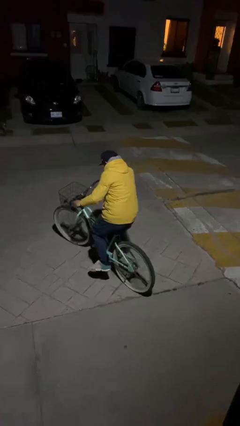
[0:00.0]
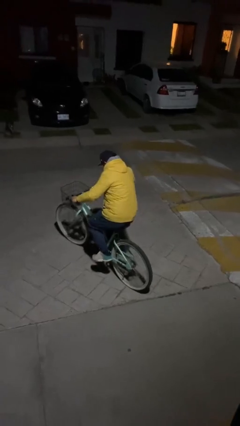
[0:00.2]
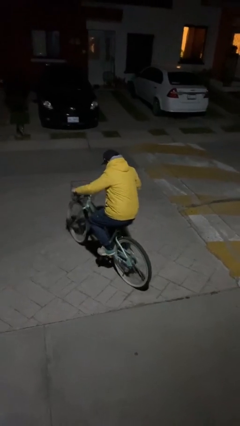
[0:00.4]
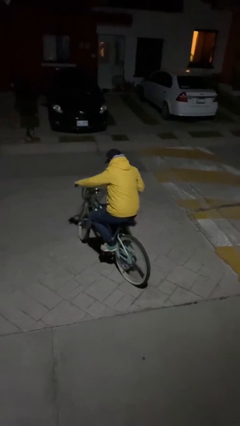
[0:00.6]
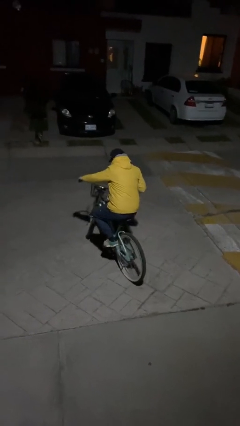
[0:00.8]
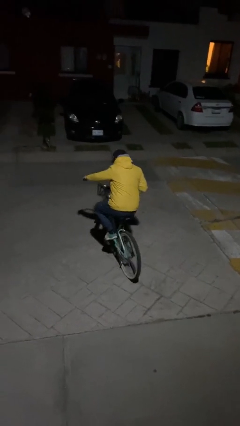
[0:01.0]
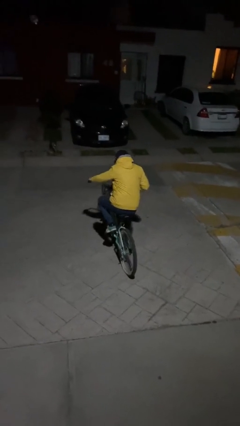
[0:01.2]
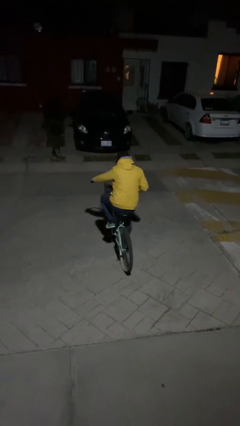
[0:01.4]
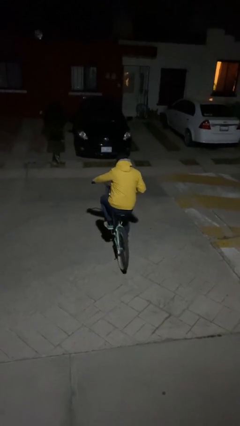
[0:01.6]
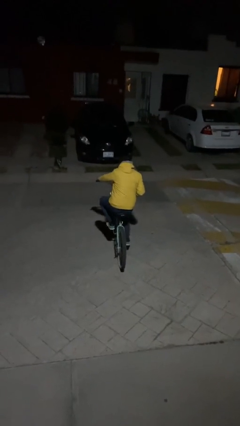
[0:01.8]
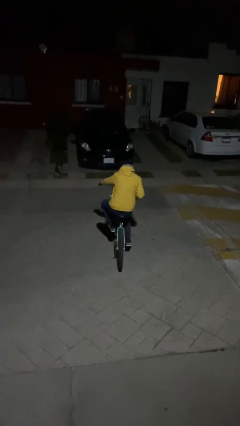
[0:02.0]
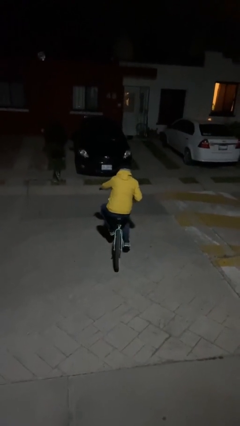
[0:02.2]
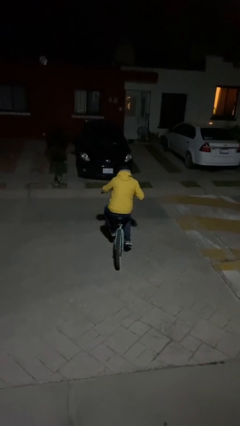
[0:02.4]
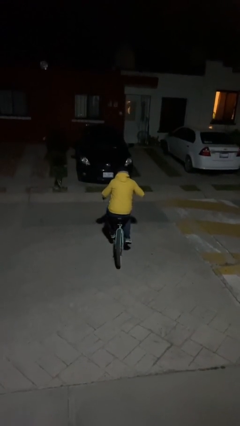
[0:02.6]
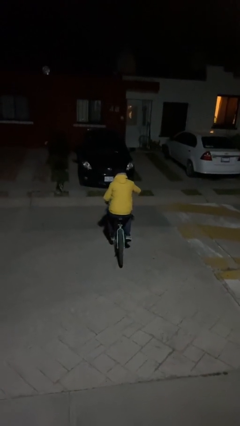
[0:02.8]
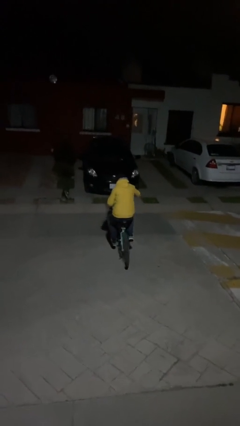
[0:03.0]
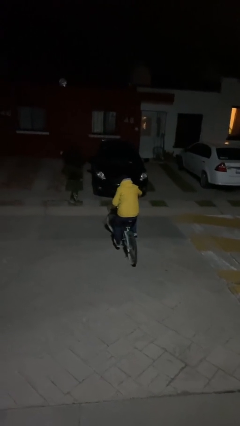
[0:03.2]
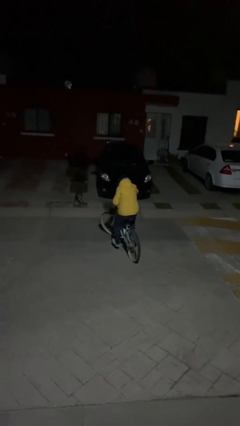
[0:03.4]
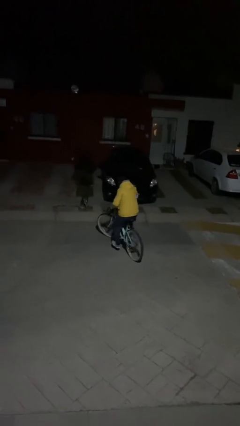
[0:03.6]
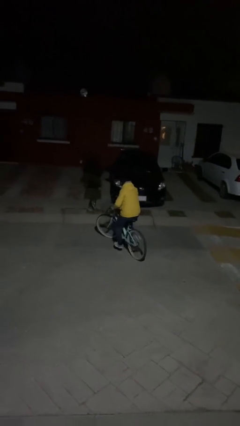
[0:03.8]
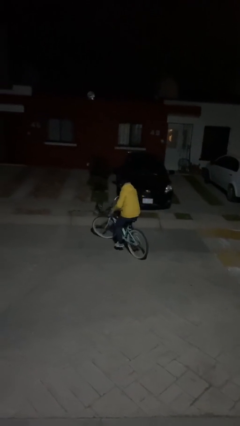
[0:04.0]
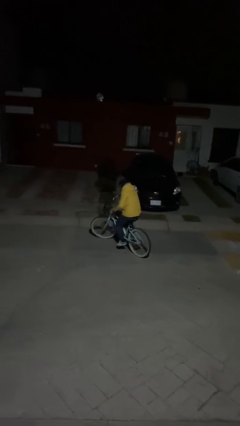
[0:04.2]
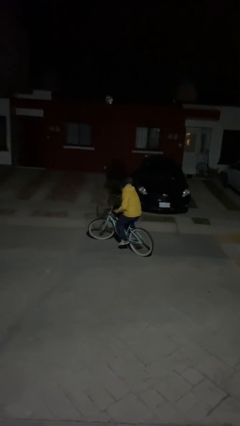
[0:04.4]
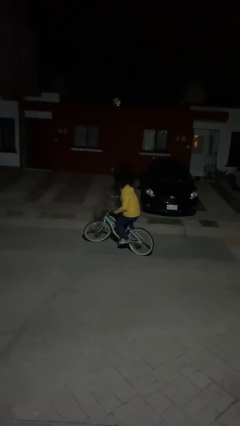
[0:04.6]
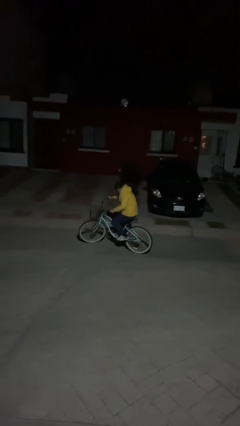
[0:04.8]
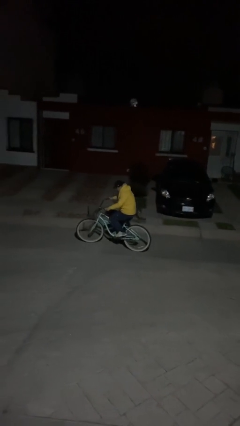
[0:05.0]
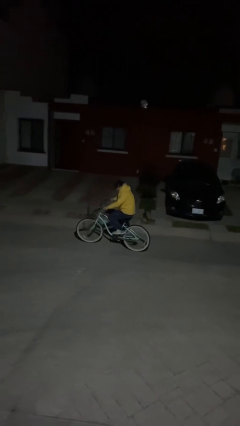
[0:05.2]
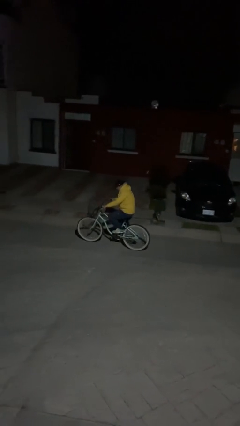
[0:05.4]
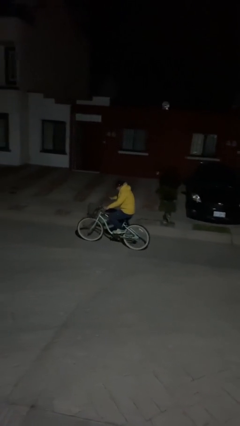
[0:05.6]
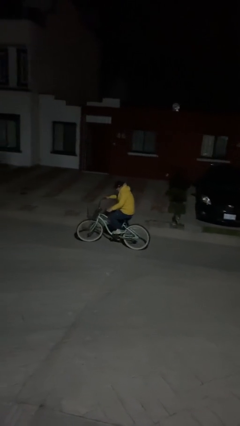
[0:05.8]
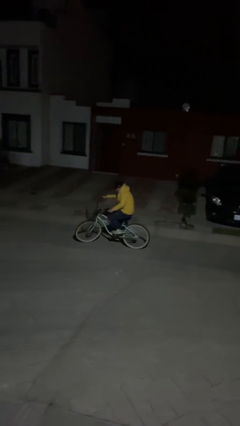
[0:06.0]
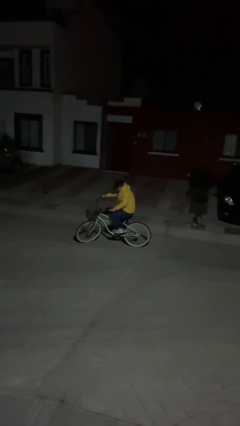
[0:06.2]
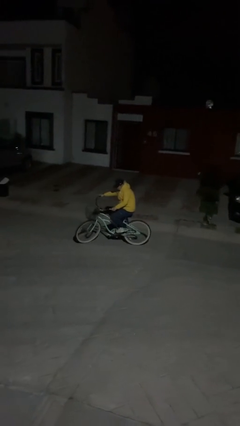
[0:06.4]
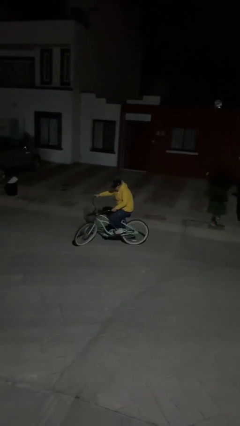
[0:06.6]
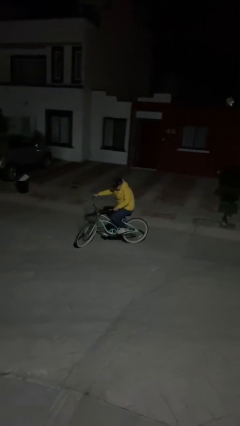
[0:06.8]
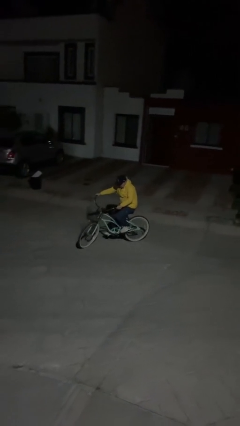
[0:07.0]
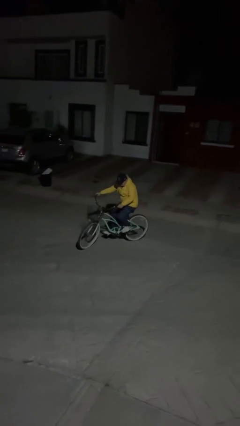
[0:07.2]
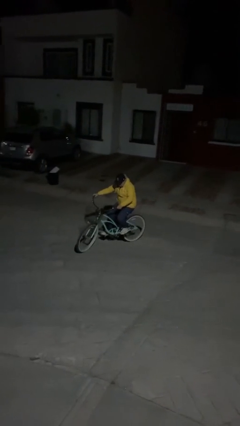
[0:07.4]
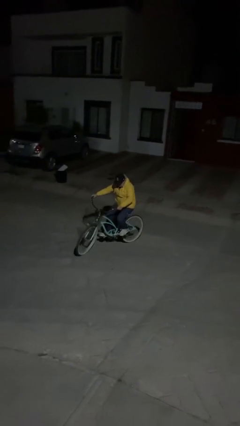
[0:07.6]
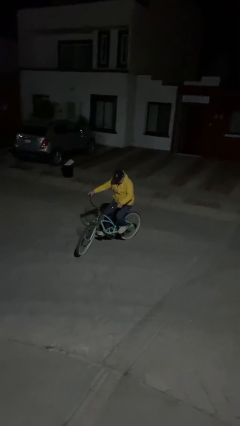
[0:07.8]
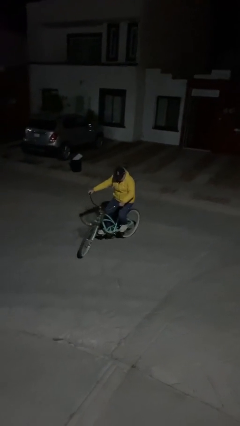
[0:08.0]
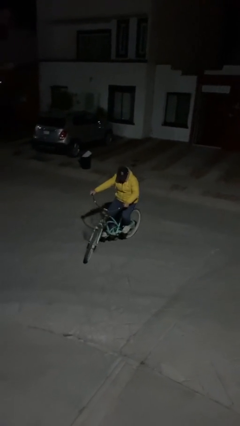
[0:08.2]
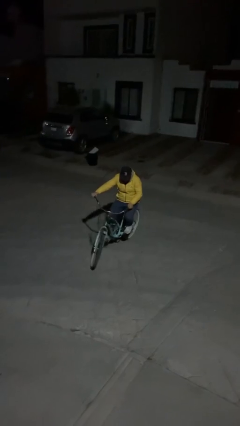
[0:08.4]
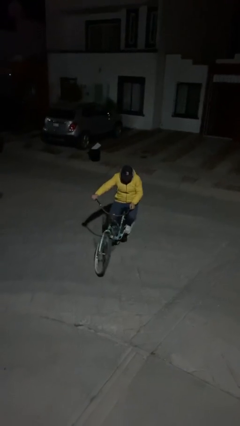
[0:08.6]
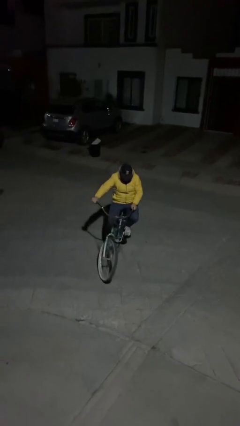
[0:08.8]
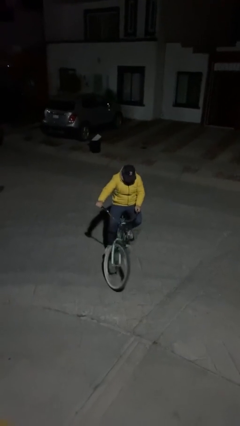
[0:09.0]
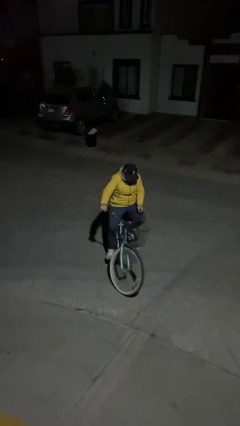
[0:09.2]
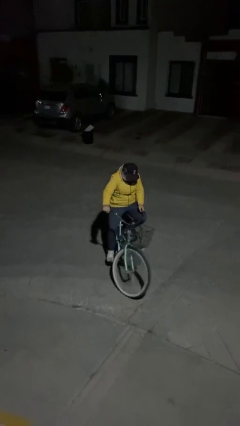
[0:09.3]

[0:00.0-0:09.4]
person rides bicycle

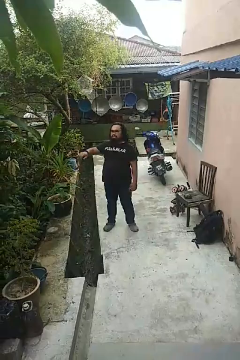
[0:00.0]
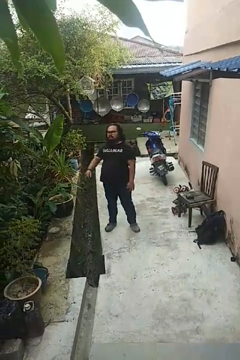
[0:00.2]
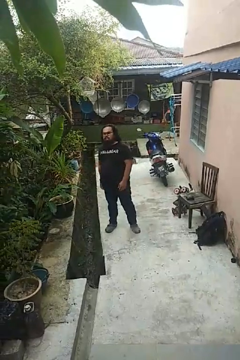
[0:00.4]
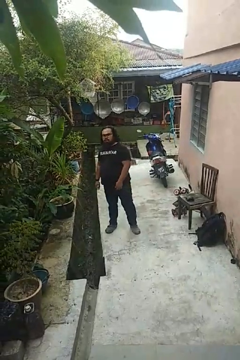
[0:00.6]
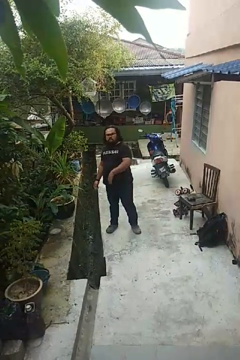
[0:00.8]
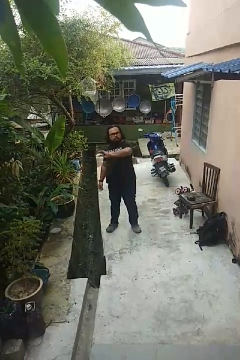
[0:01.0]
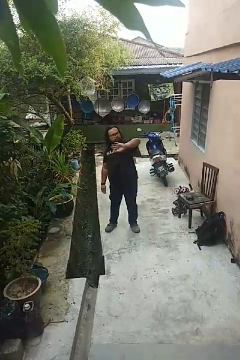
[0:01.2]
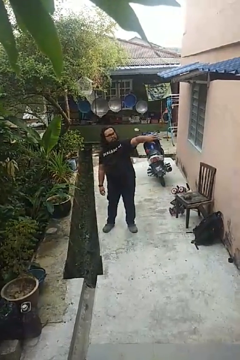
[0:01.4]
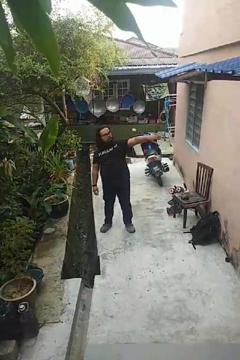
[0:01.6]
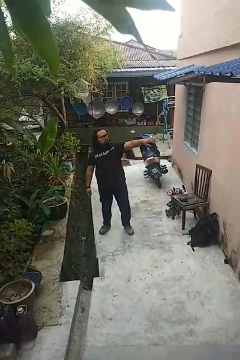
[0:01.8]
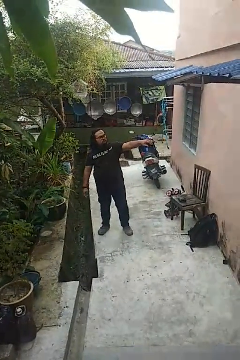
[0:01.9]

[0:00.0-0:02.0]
person gestures swipe left

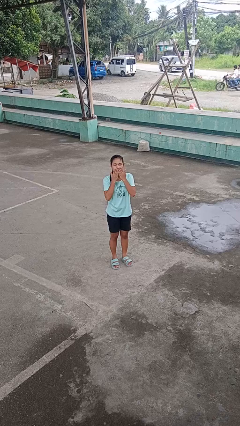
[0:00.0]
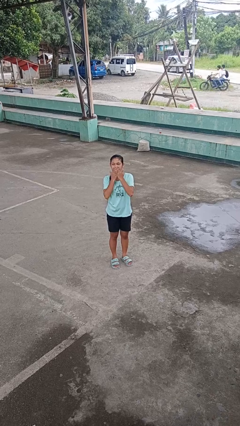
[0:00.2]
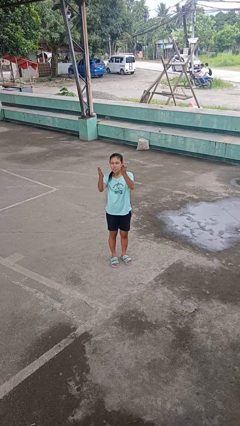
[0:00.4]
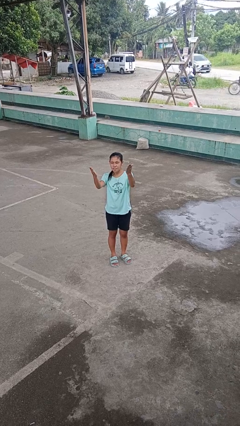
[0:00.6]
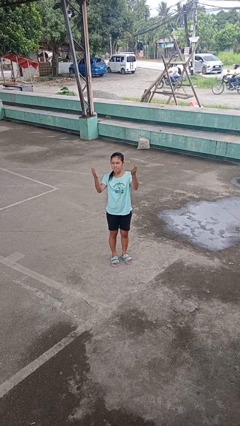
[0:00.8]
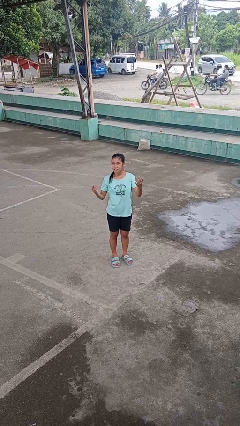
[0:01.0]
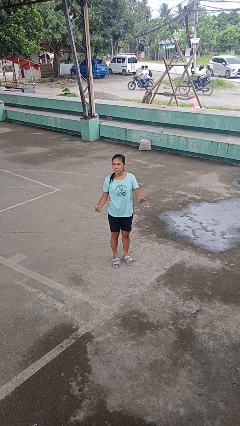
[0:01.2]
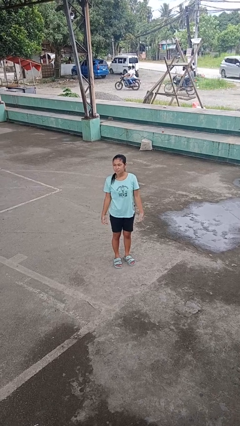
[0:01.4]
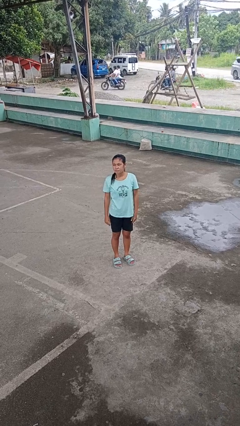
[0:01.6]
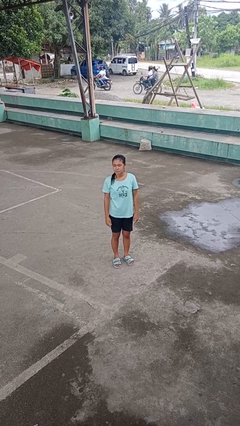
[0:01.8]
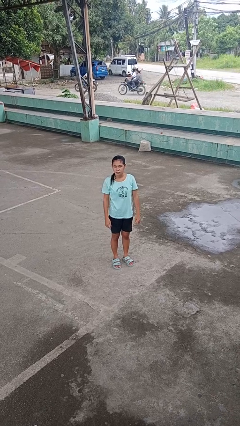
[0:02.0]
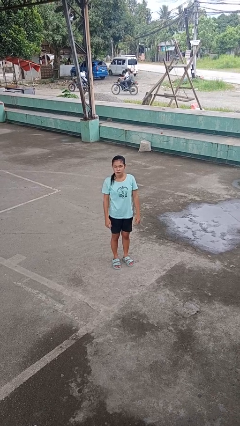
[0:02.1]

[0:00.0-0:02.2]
person gestures blow kiss

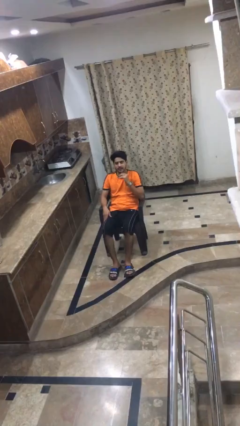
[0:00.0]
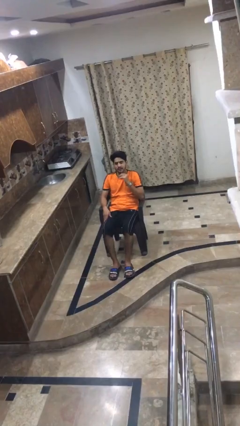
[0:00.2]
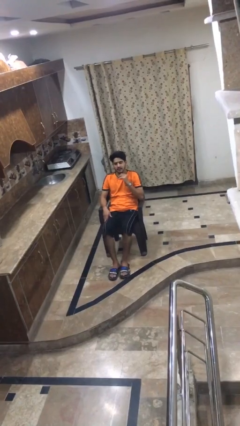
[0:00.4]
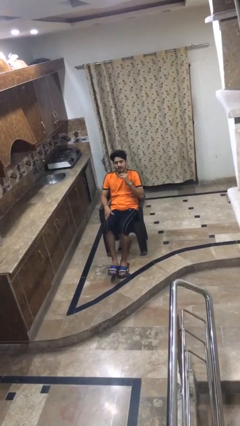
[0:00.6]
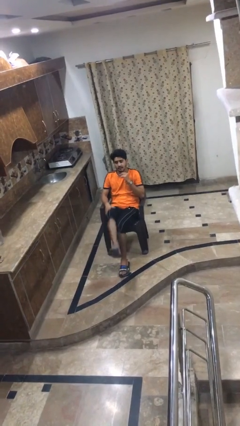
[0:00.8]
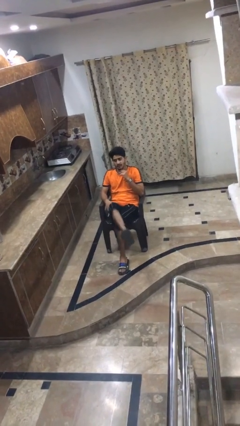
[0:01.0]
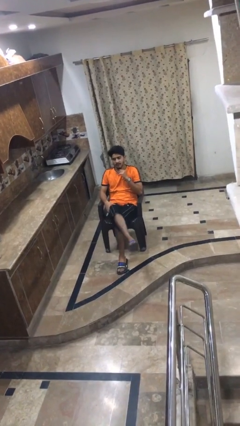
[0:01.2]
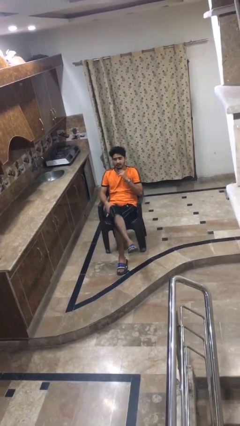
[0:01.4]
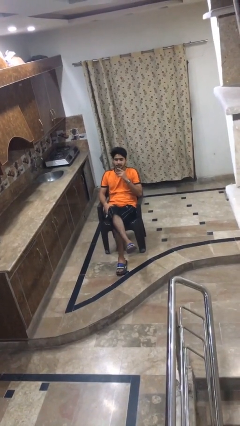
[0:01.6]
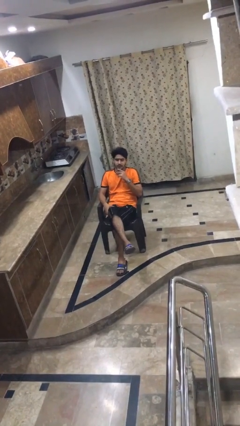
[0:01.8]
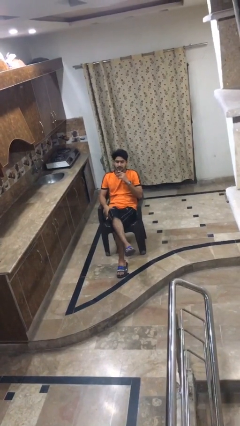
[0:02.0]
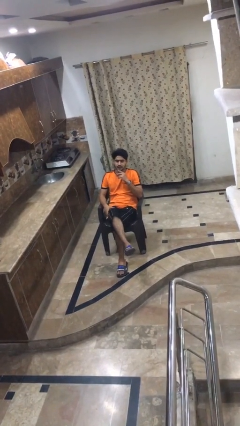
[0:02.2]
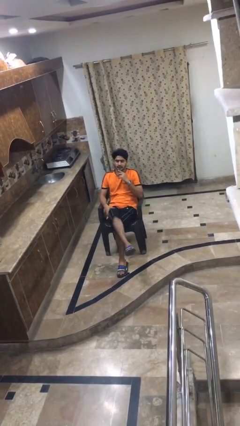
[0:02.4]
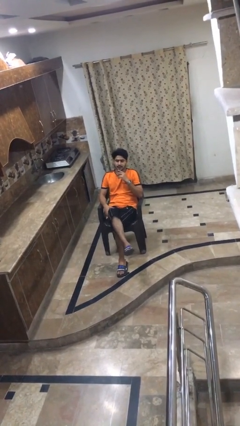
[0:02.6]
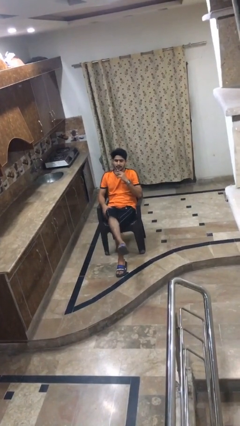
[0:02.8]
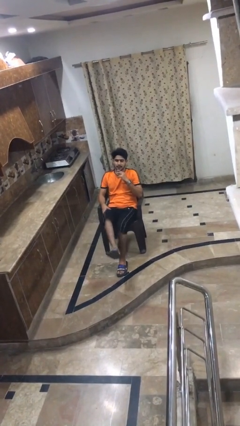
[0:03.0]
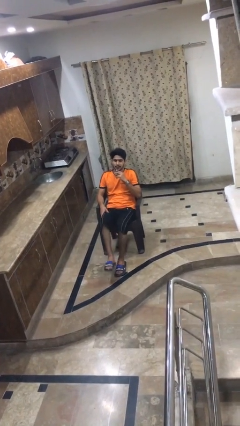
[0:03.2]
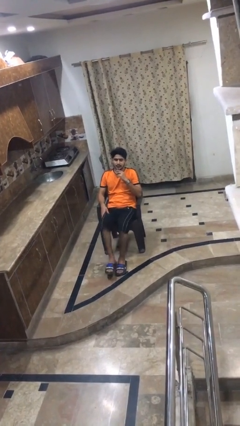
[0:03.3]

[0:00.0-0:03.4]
person crosses legs

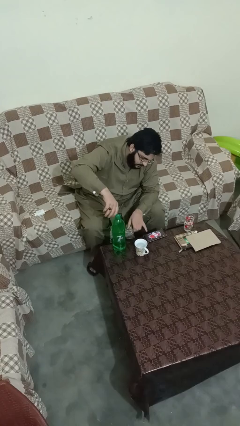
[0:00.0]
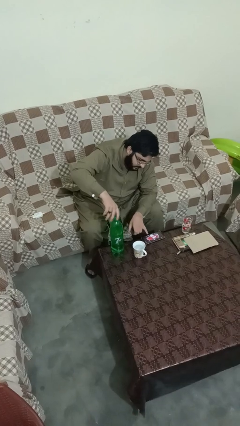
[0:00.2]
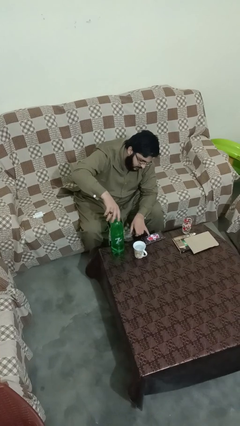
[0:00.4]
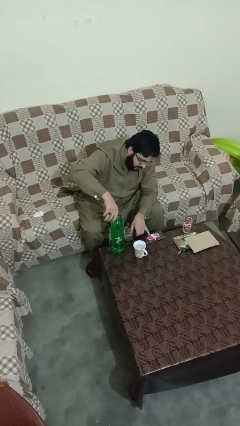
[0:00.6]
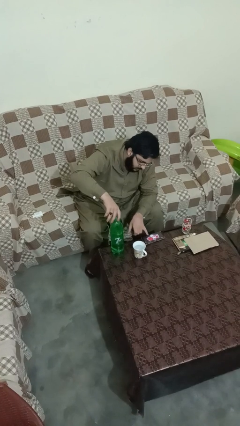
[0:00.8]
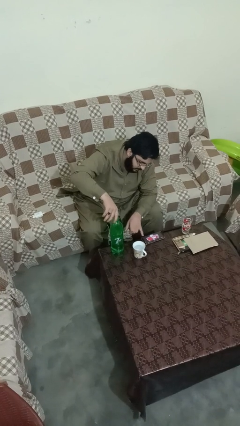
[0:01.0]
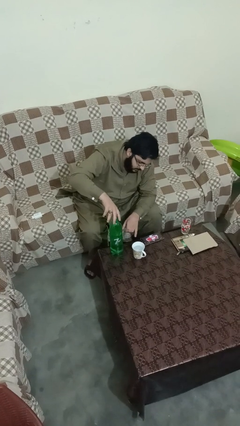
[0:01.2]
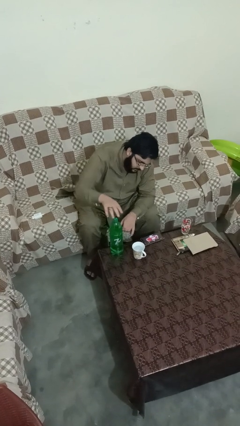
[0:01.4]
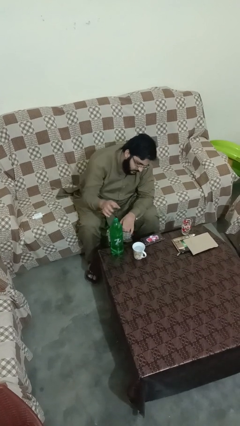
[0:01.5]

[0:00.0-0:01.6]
person unscrews lid from bottle
